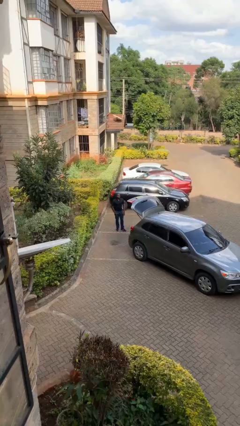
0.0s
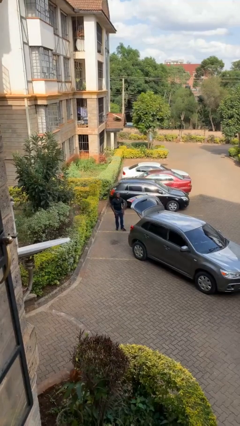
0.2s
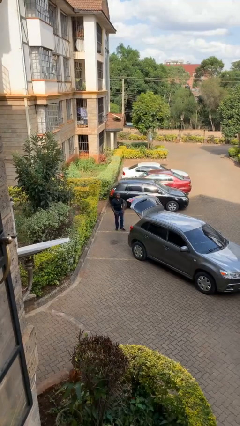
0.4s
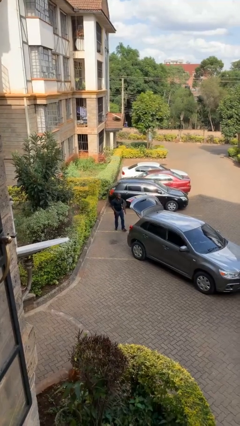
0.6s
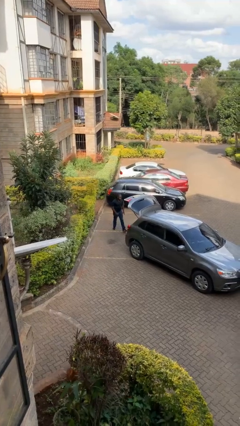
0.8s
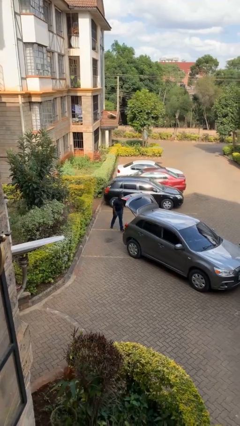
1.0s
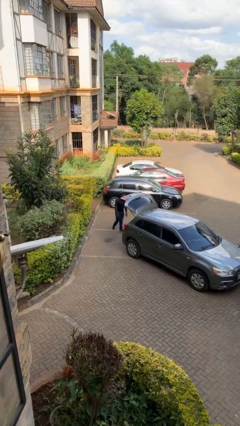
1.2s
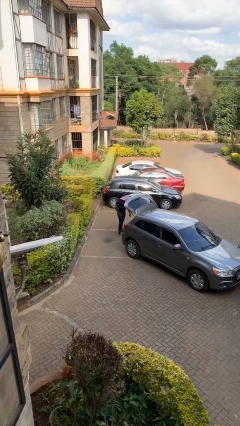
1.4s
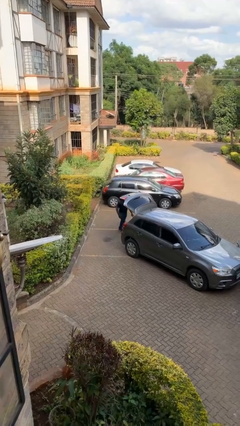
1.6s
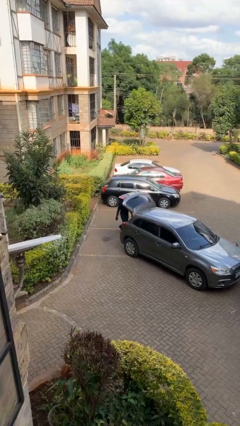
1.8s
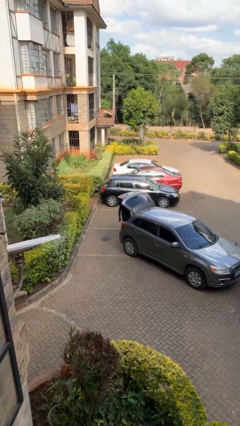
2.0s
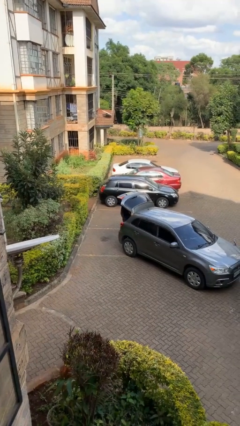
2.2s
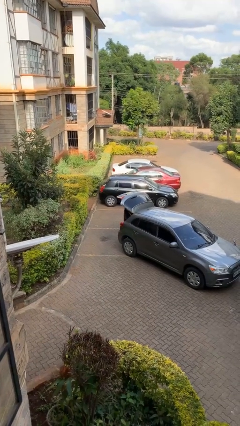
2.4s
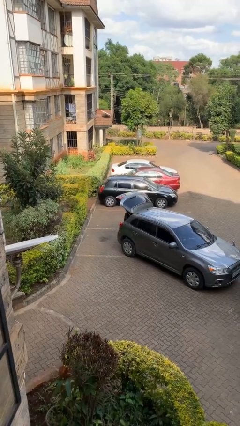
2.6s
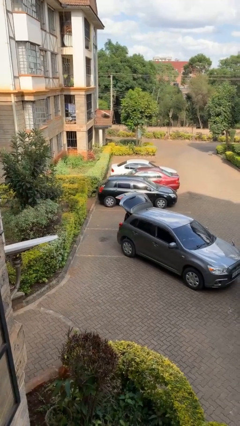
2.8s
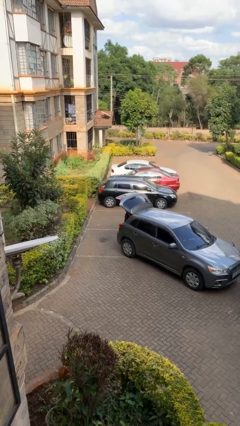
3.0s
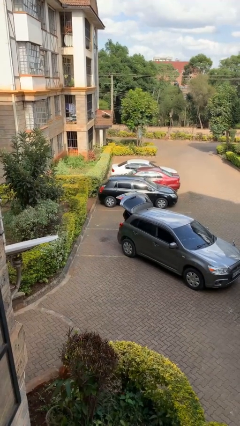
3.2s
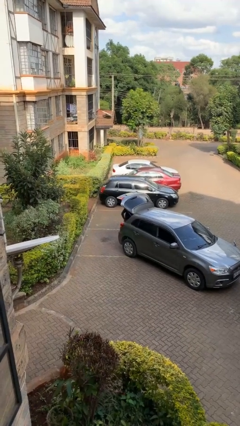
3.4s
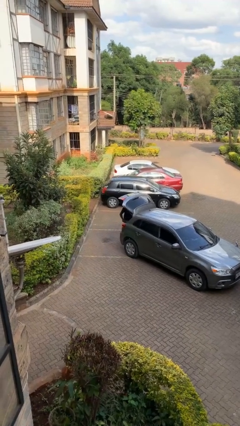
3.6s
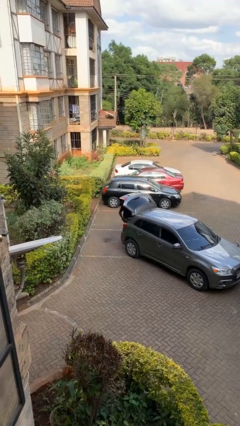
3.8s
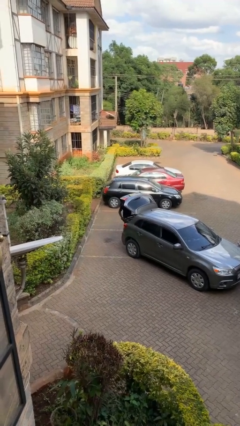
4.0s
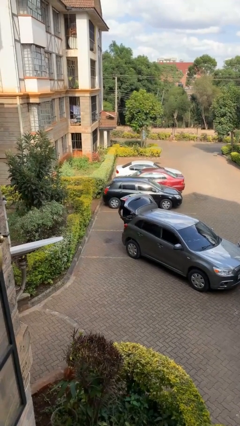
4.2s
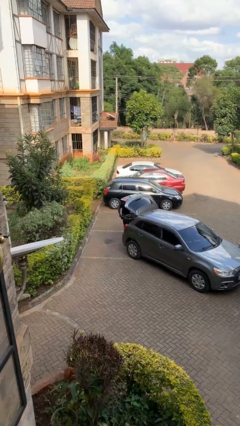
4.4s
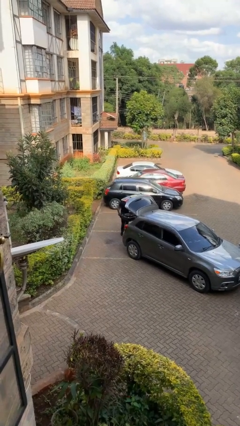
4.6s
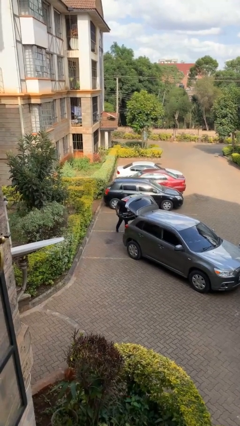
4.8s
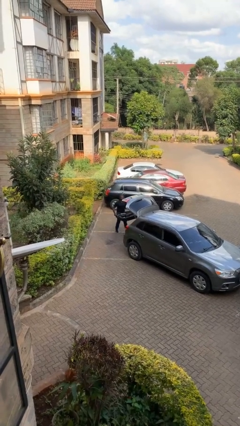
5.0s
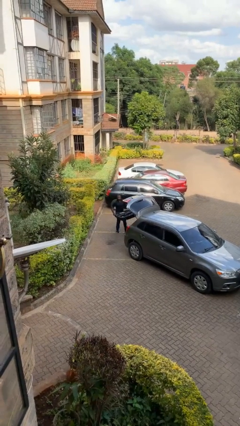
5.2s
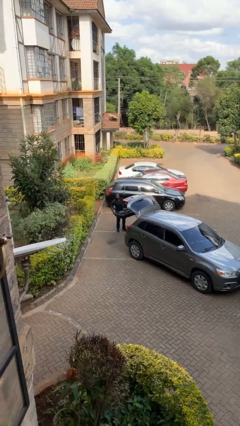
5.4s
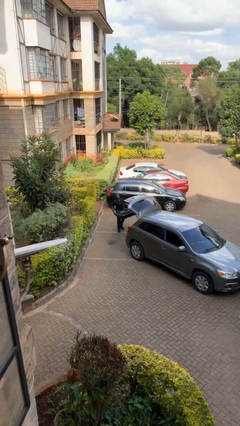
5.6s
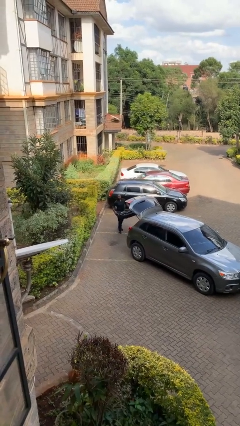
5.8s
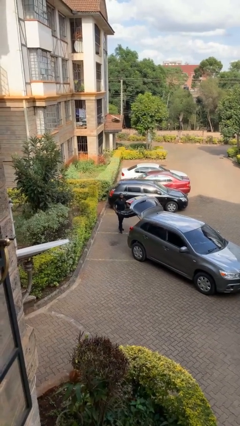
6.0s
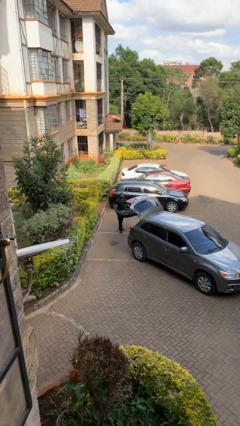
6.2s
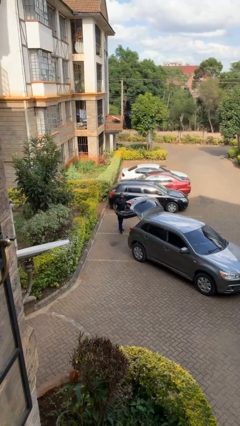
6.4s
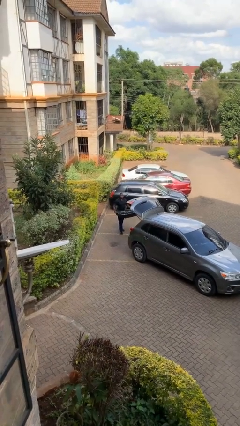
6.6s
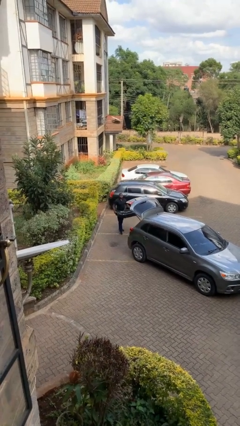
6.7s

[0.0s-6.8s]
person unloads car

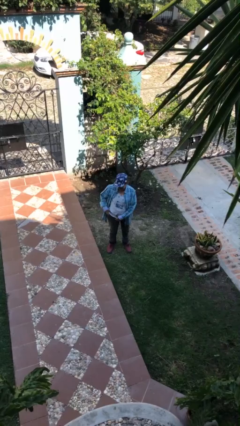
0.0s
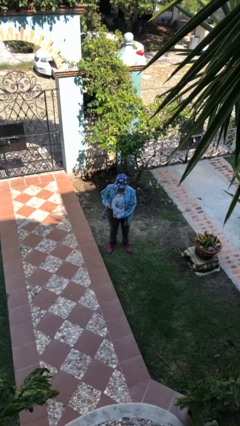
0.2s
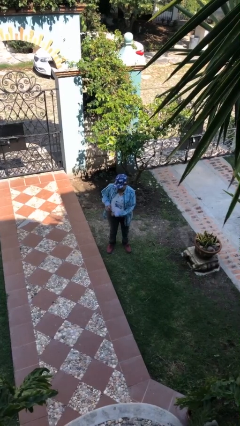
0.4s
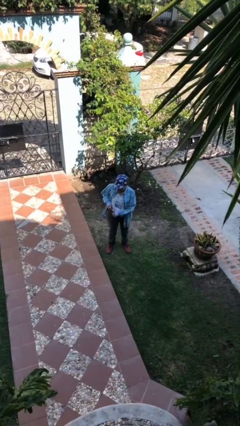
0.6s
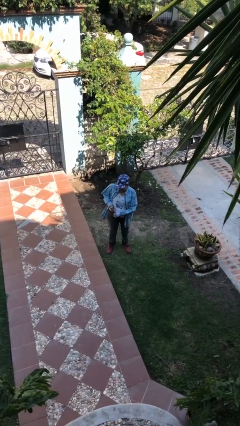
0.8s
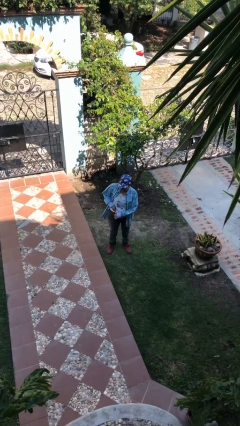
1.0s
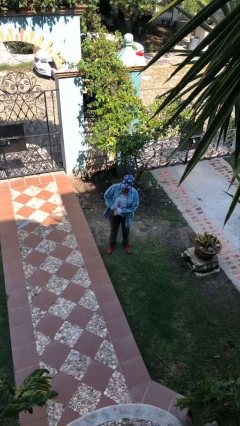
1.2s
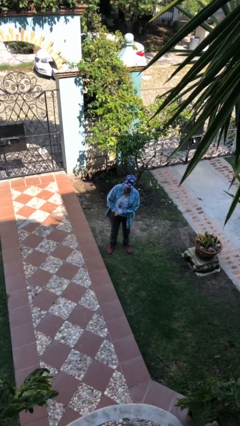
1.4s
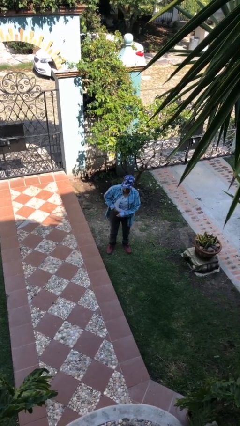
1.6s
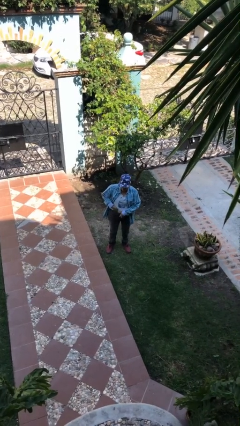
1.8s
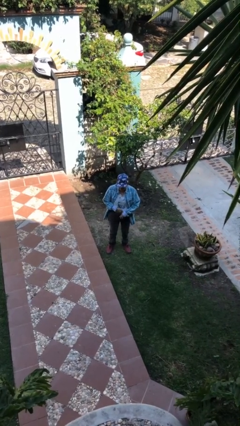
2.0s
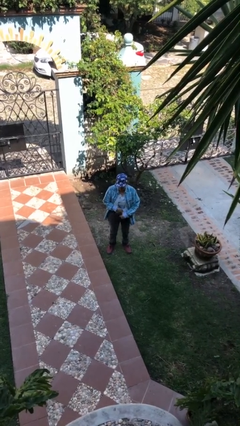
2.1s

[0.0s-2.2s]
person tucks in shirt

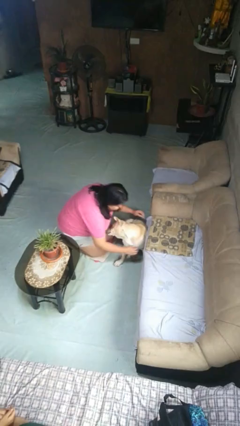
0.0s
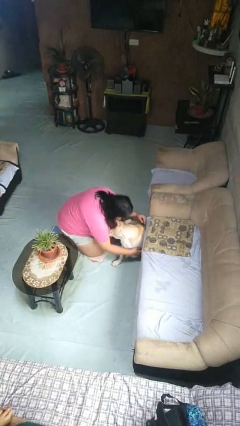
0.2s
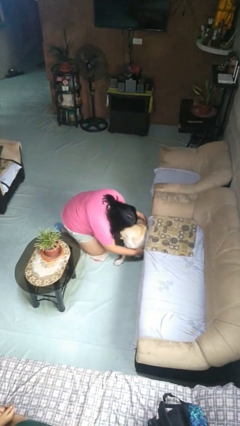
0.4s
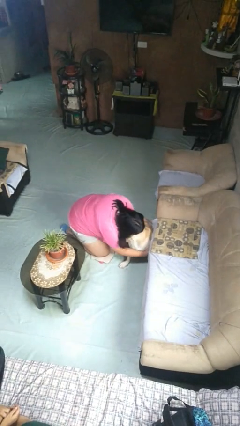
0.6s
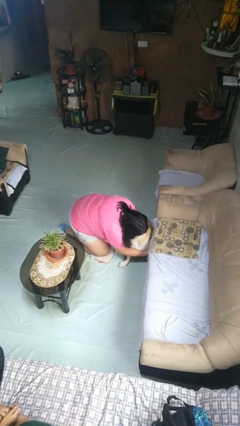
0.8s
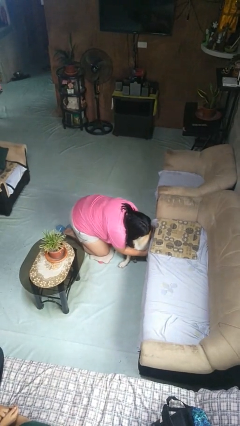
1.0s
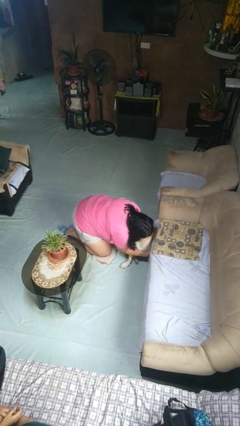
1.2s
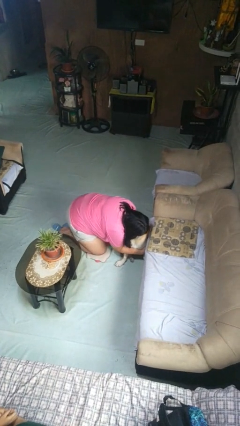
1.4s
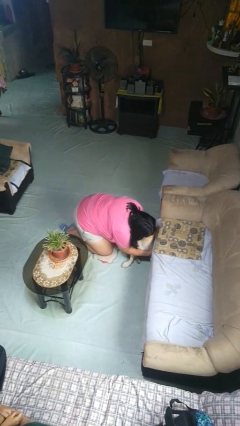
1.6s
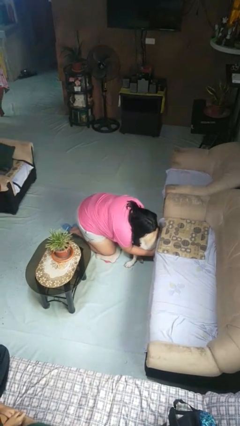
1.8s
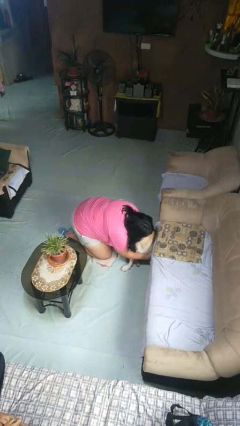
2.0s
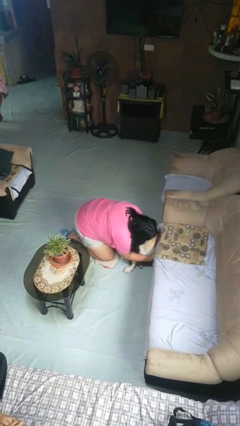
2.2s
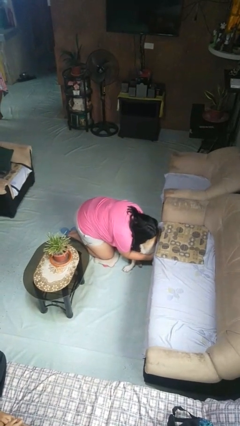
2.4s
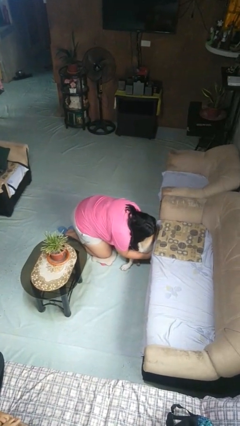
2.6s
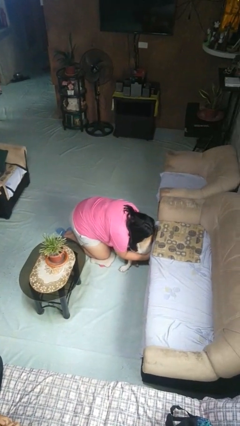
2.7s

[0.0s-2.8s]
person hugs dog

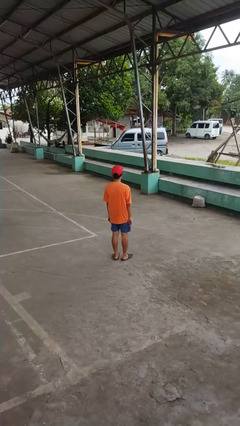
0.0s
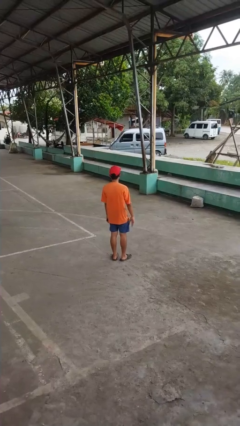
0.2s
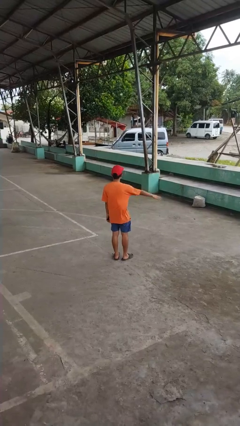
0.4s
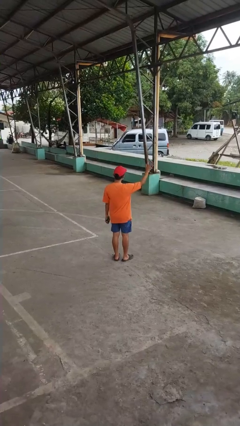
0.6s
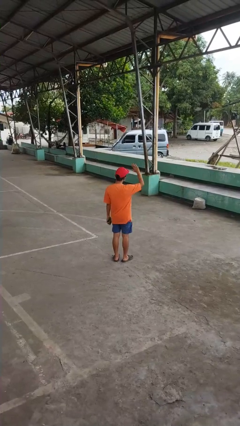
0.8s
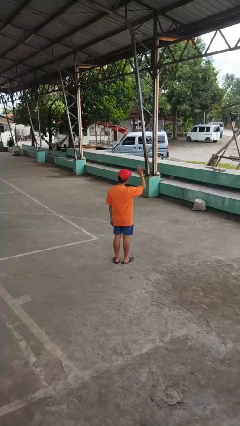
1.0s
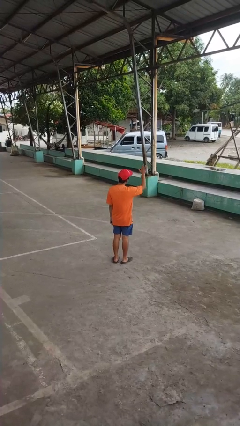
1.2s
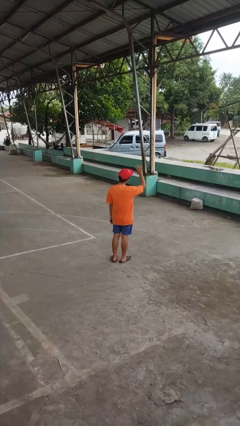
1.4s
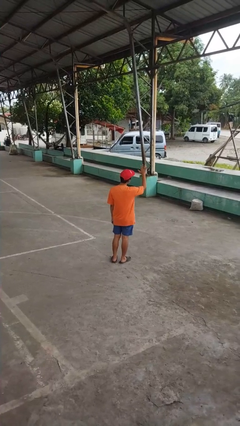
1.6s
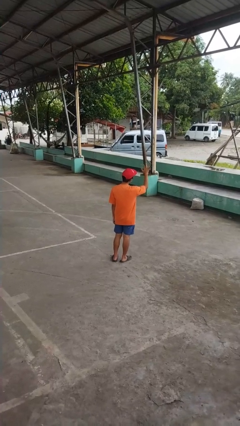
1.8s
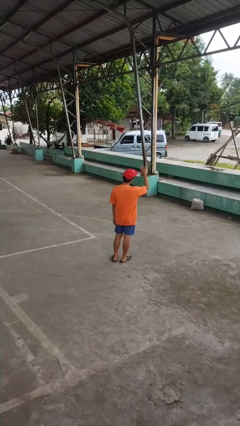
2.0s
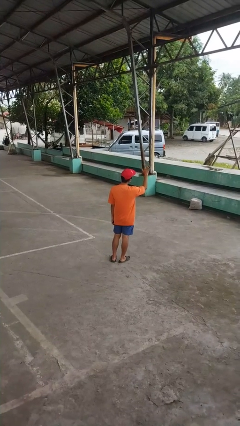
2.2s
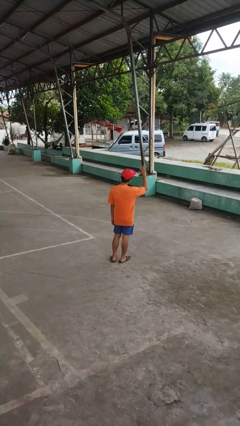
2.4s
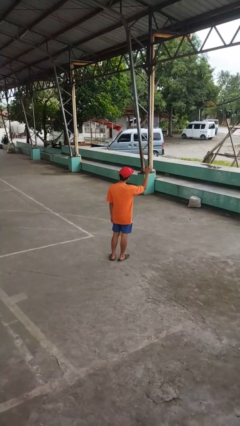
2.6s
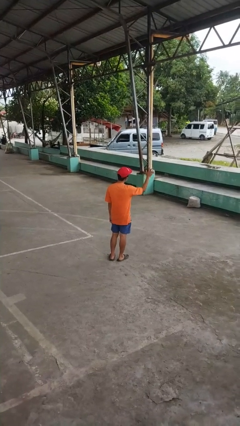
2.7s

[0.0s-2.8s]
person waves at person

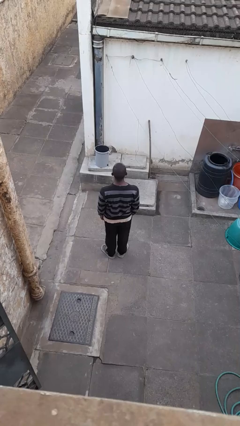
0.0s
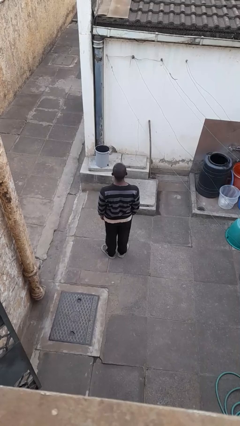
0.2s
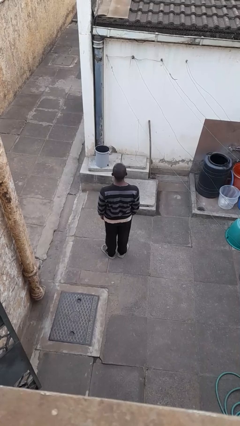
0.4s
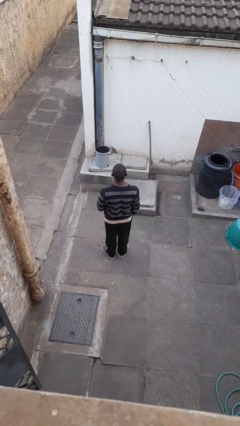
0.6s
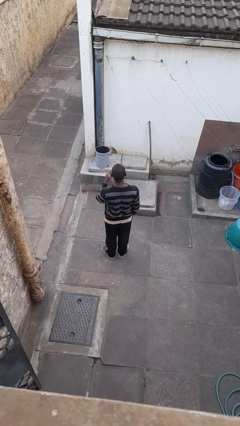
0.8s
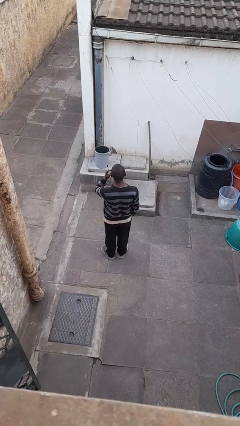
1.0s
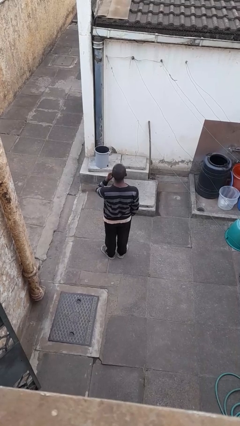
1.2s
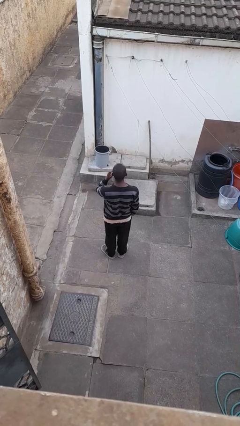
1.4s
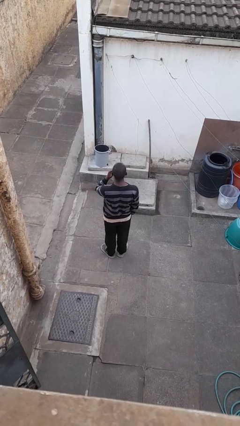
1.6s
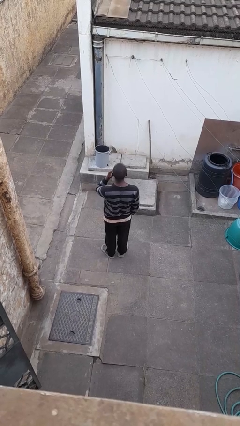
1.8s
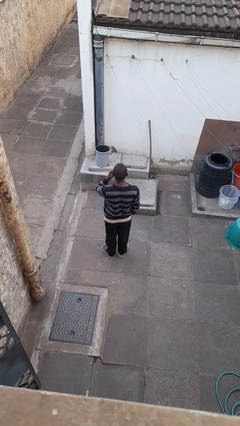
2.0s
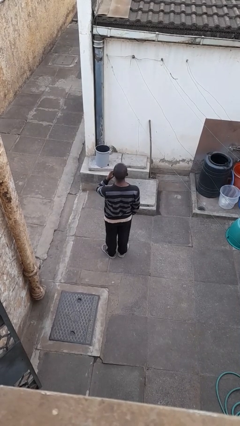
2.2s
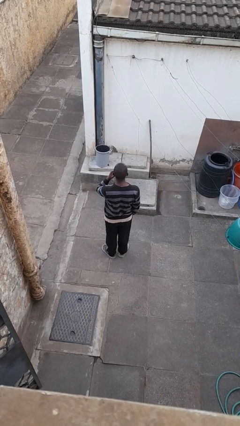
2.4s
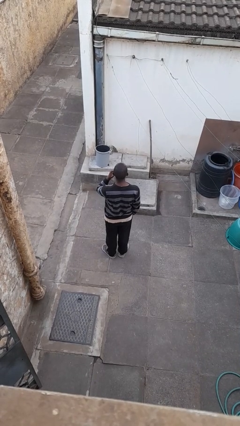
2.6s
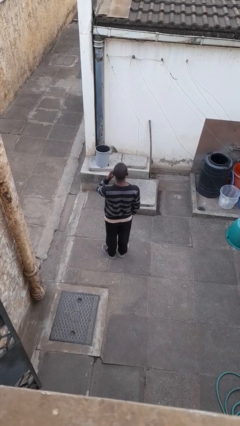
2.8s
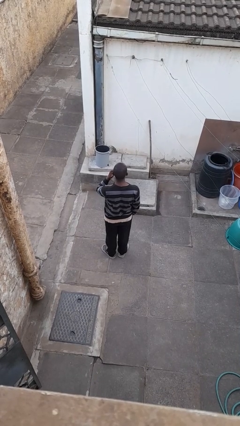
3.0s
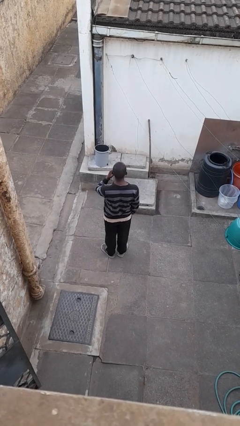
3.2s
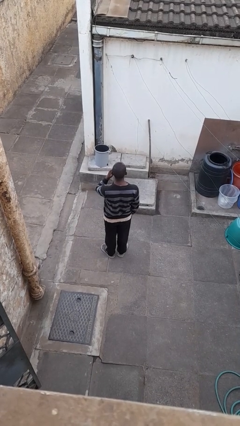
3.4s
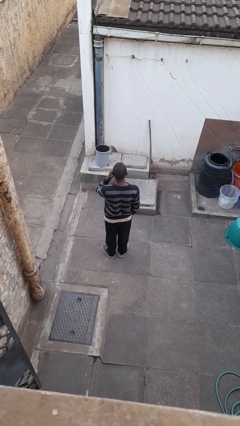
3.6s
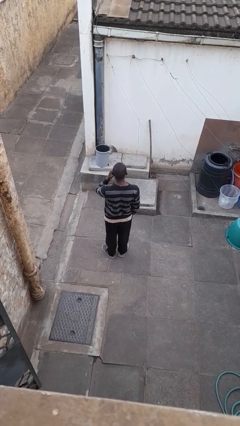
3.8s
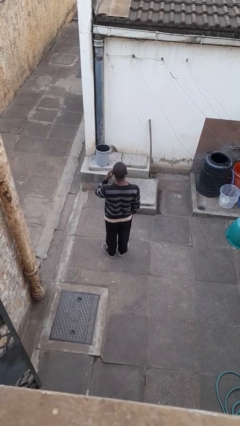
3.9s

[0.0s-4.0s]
person scratches face
